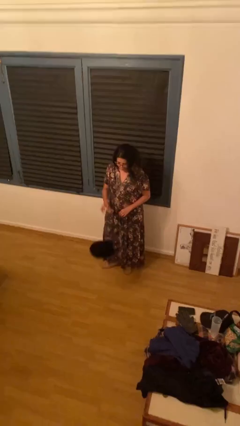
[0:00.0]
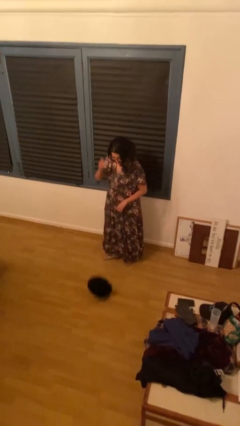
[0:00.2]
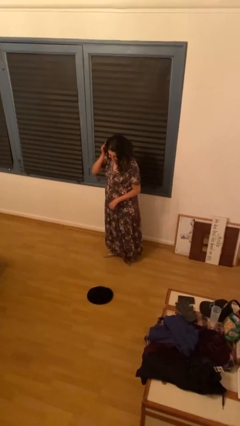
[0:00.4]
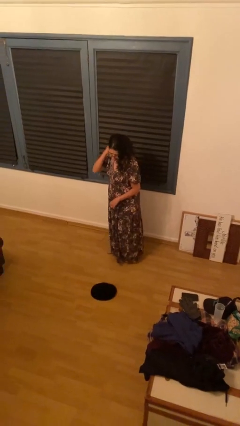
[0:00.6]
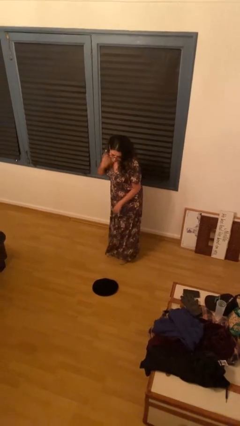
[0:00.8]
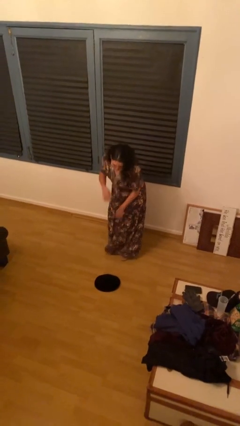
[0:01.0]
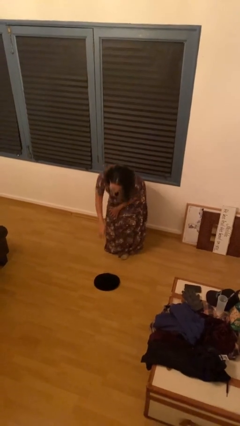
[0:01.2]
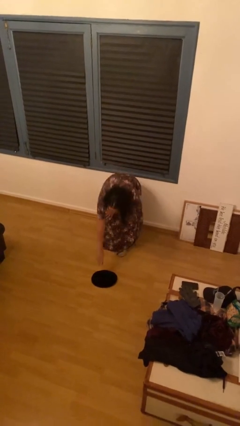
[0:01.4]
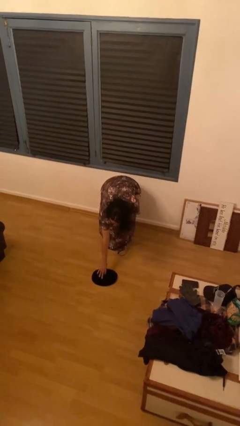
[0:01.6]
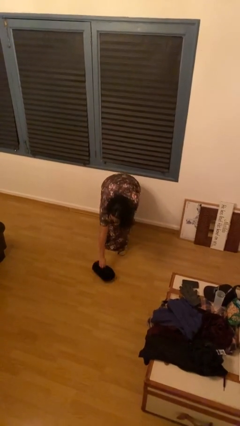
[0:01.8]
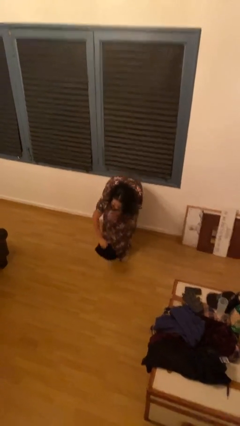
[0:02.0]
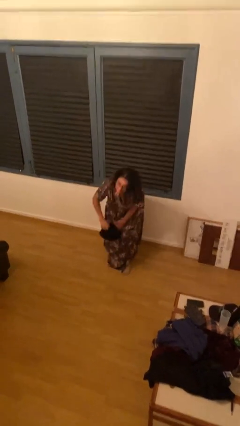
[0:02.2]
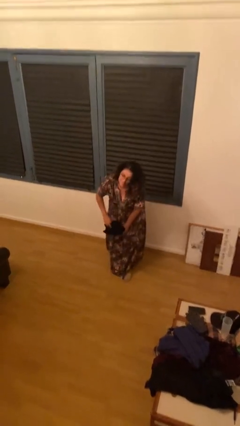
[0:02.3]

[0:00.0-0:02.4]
person drops object

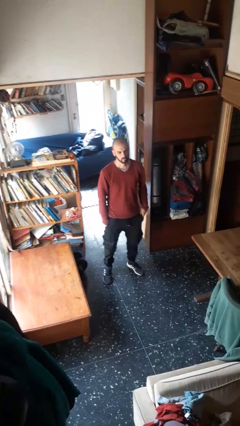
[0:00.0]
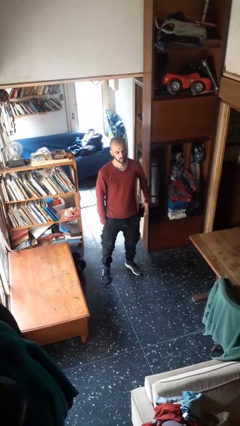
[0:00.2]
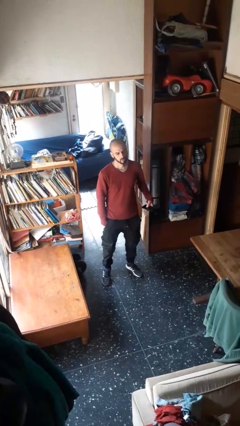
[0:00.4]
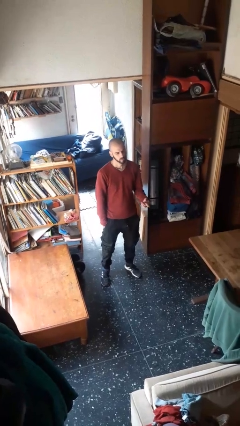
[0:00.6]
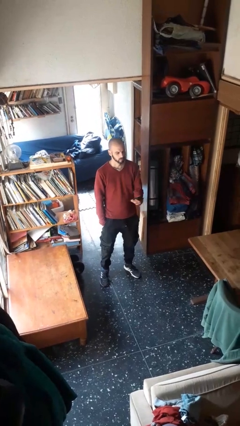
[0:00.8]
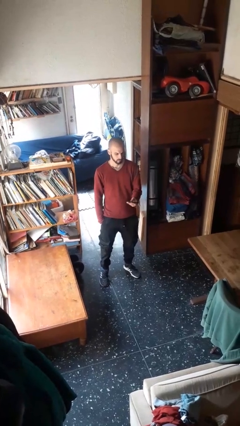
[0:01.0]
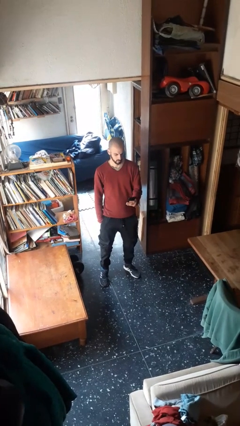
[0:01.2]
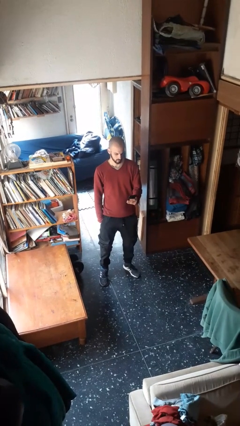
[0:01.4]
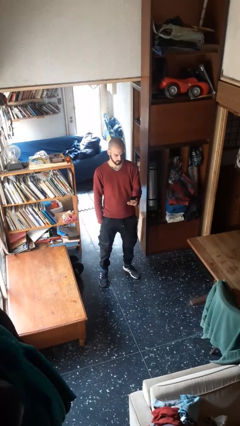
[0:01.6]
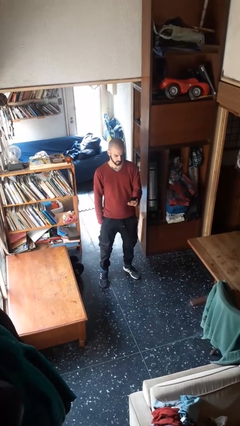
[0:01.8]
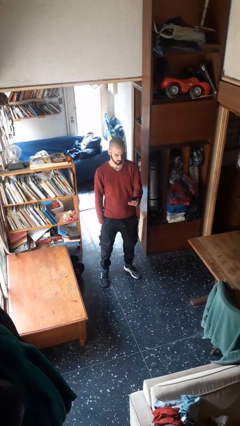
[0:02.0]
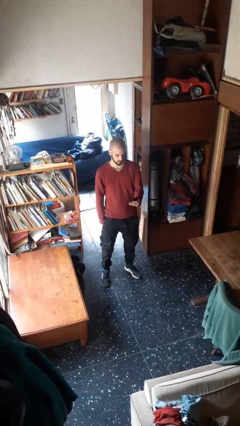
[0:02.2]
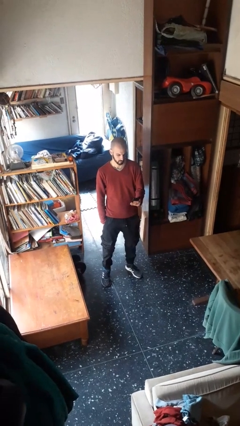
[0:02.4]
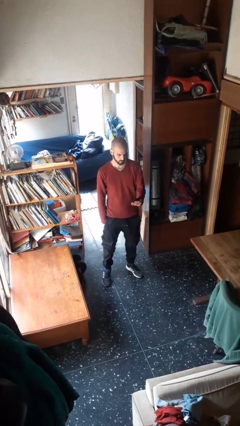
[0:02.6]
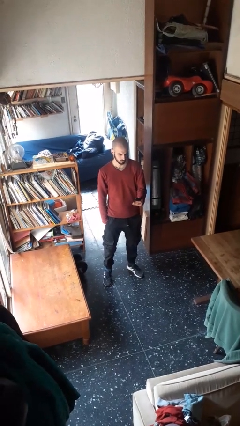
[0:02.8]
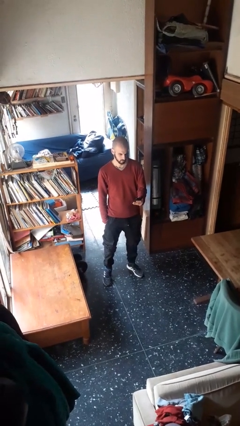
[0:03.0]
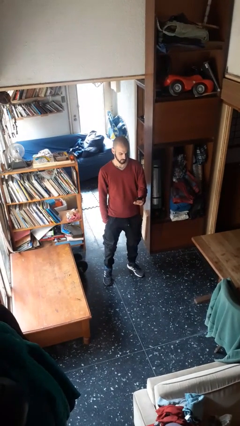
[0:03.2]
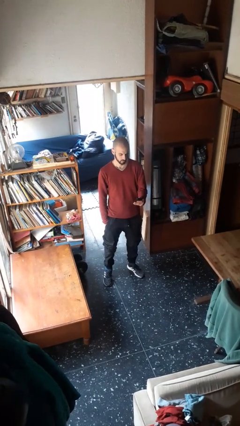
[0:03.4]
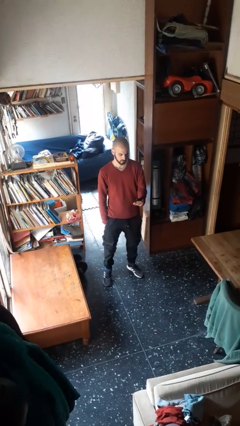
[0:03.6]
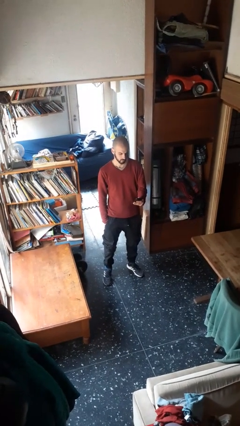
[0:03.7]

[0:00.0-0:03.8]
person takes phone from pocket

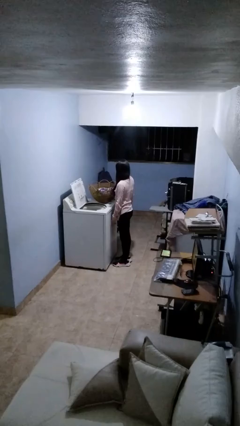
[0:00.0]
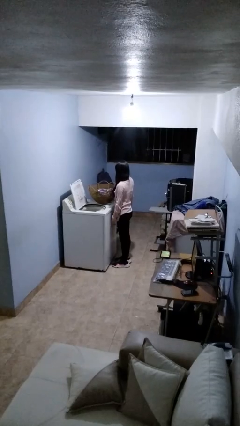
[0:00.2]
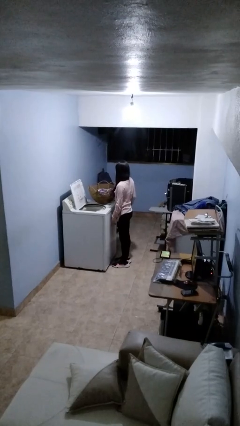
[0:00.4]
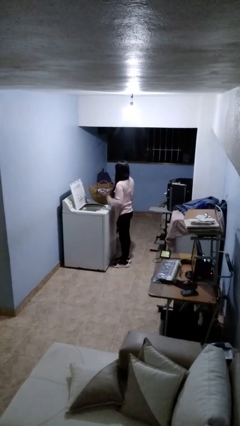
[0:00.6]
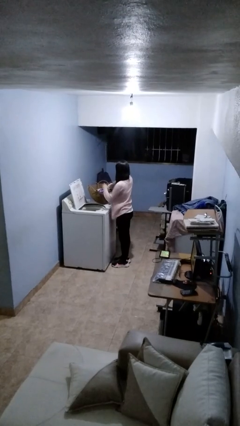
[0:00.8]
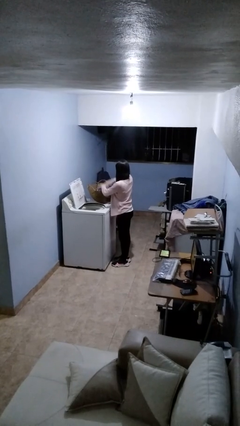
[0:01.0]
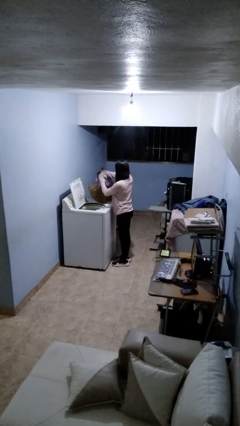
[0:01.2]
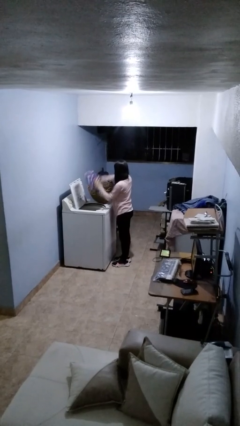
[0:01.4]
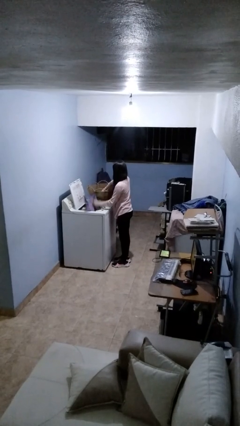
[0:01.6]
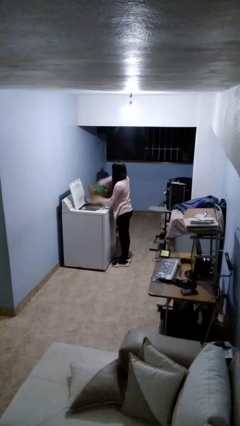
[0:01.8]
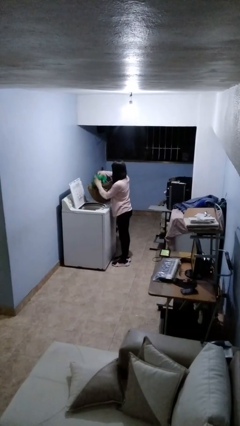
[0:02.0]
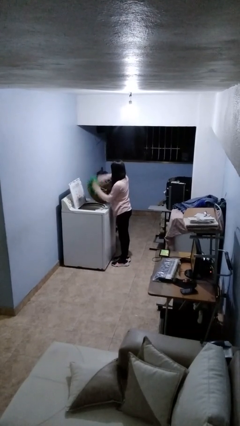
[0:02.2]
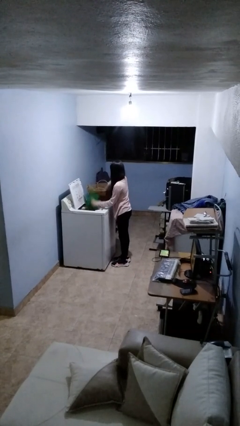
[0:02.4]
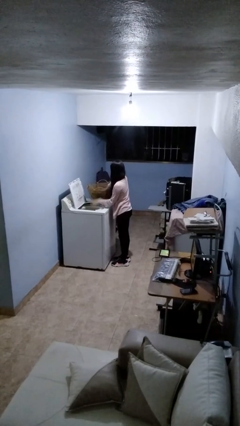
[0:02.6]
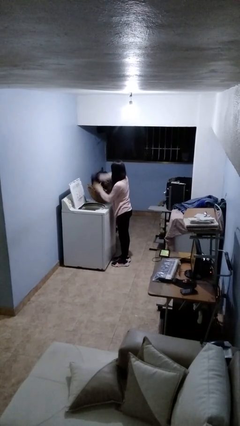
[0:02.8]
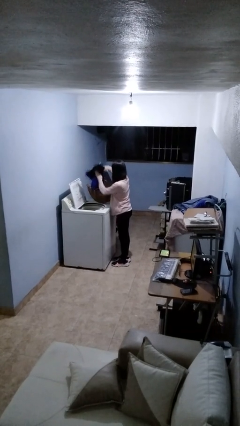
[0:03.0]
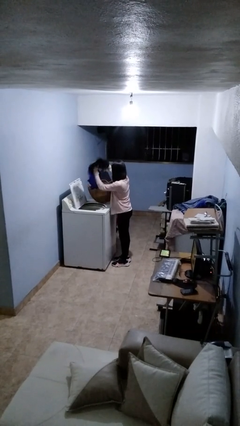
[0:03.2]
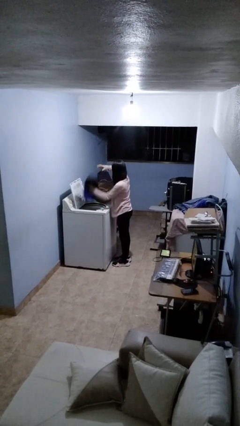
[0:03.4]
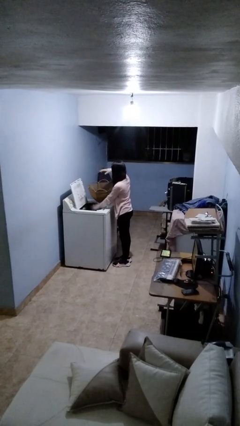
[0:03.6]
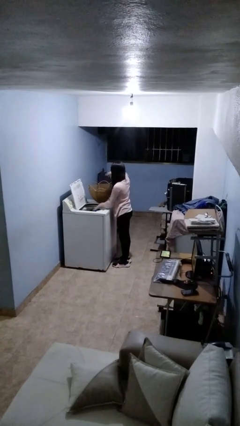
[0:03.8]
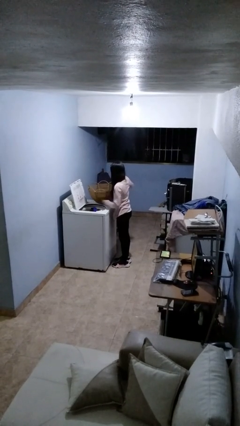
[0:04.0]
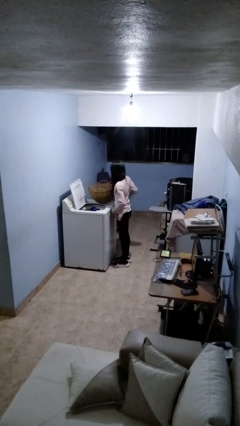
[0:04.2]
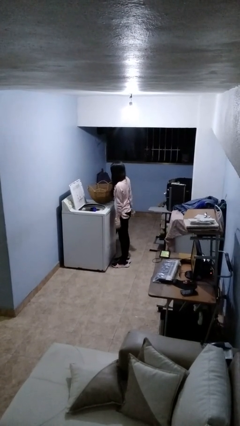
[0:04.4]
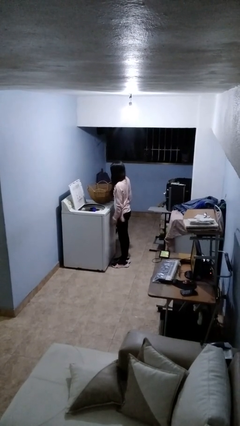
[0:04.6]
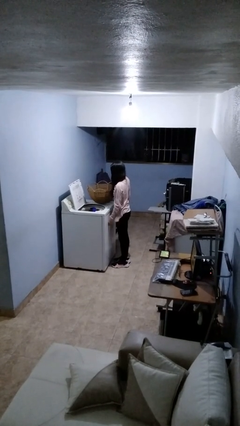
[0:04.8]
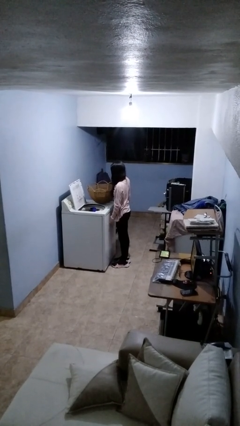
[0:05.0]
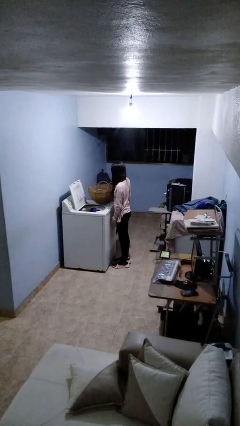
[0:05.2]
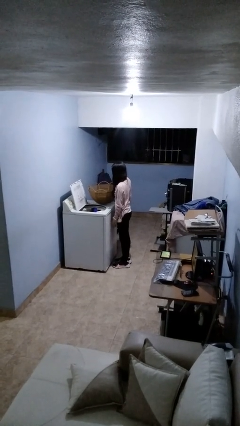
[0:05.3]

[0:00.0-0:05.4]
person unloads clotheswasher

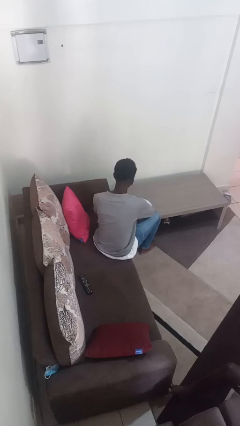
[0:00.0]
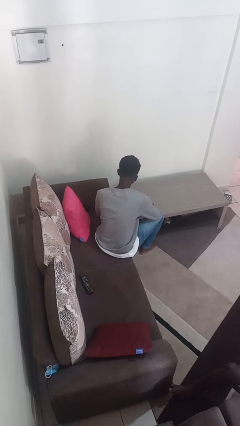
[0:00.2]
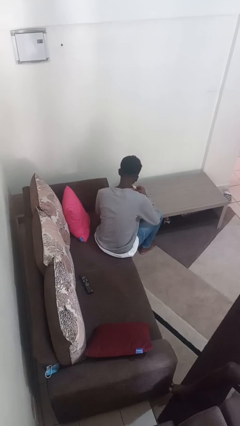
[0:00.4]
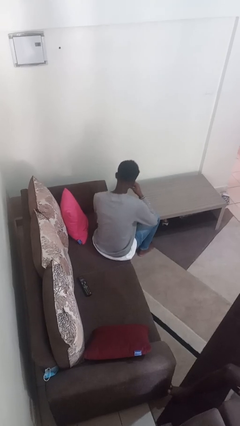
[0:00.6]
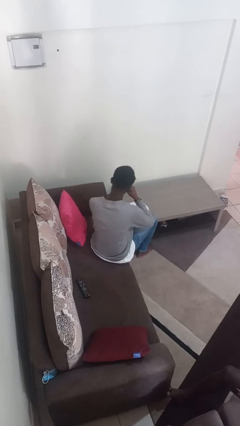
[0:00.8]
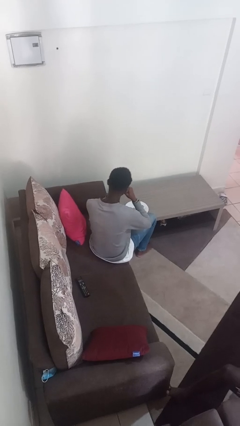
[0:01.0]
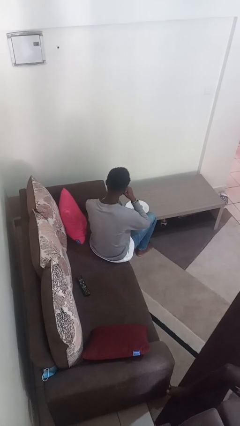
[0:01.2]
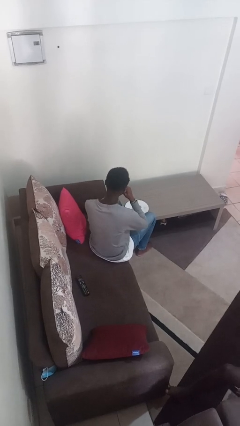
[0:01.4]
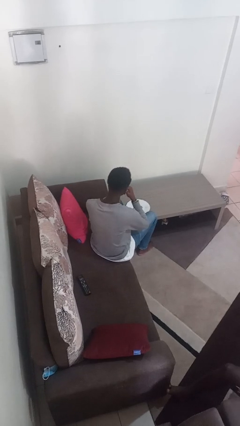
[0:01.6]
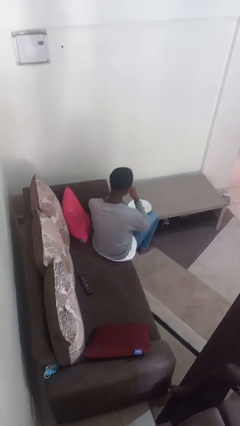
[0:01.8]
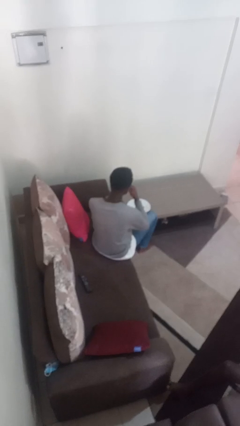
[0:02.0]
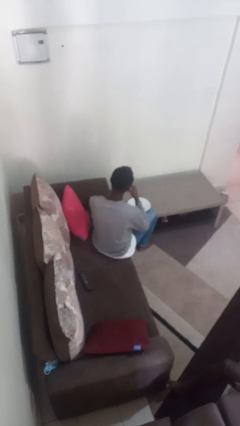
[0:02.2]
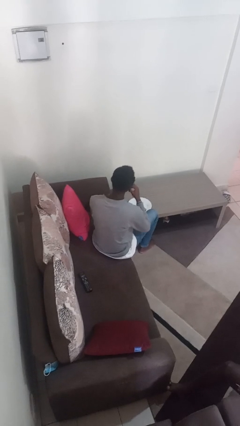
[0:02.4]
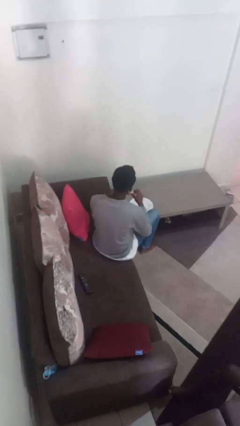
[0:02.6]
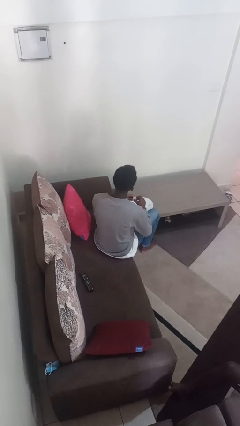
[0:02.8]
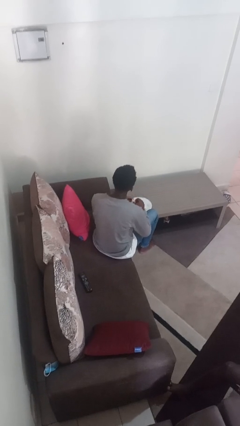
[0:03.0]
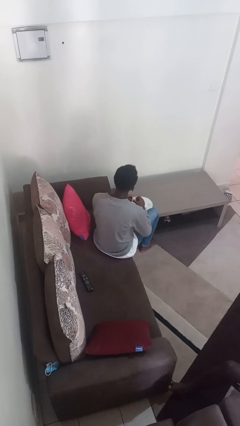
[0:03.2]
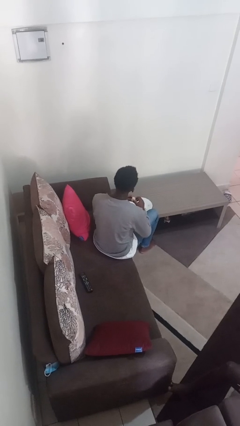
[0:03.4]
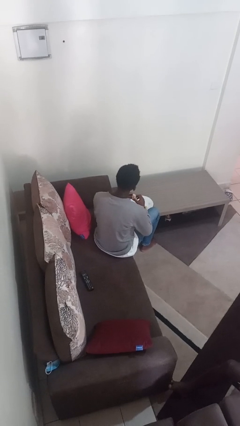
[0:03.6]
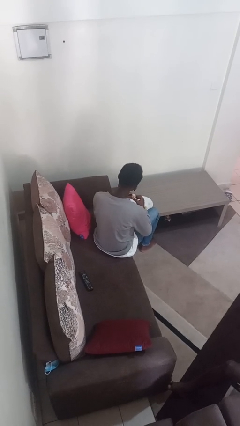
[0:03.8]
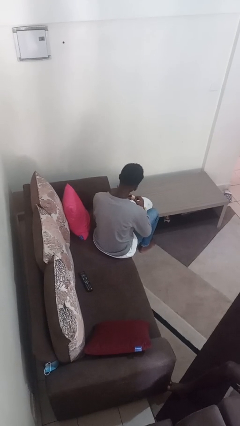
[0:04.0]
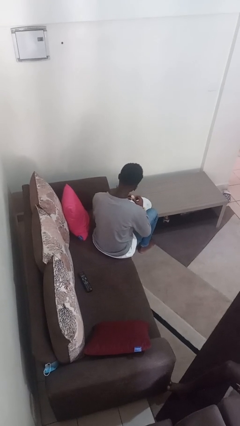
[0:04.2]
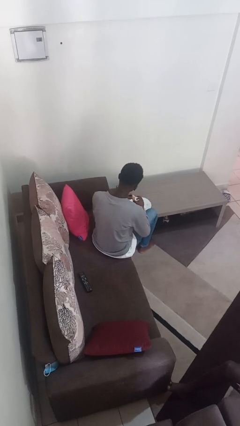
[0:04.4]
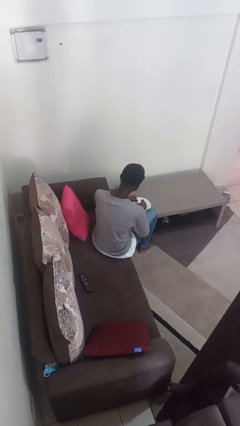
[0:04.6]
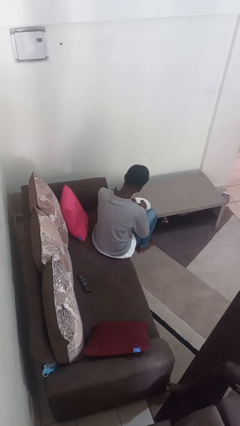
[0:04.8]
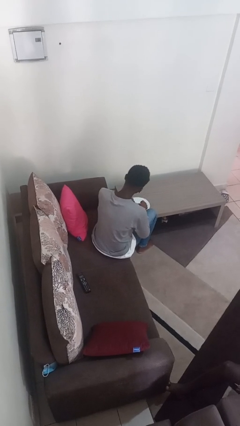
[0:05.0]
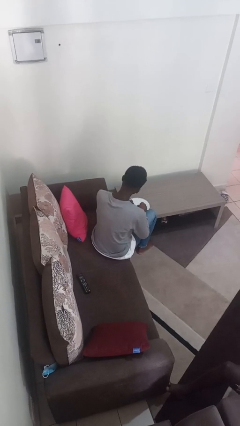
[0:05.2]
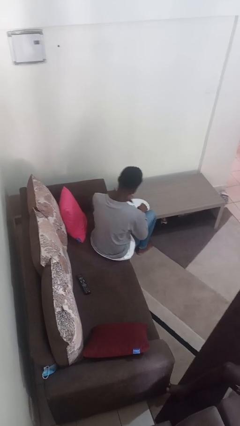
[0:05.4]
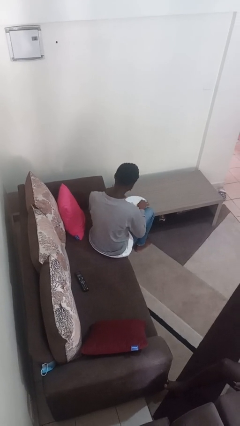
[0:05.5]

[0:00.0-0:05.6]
person eats with hands

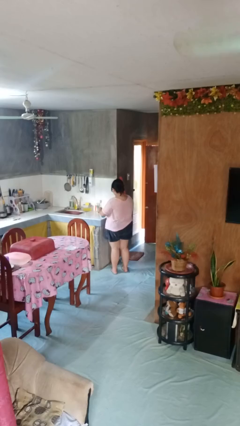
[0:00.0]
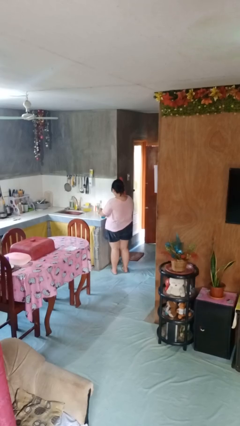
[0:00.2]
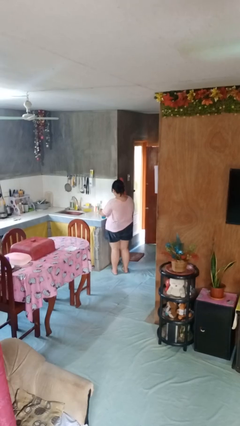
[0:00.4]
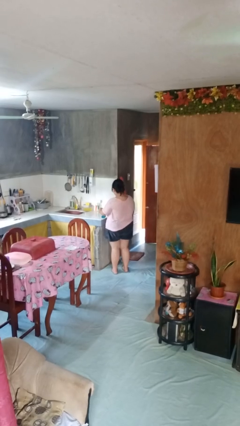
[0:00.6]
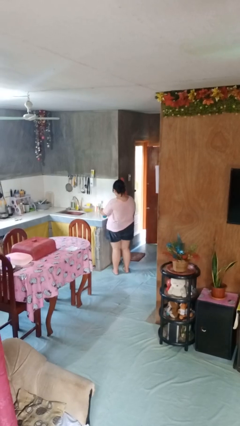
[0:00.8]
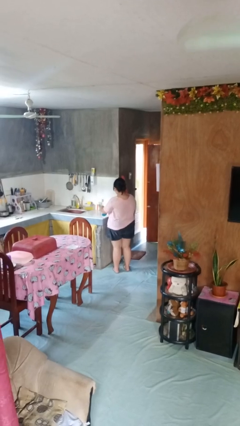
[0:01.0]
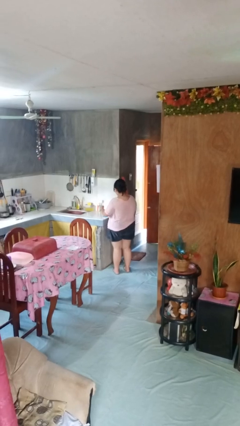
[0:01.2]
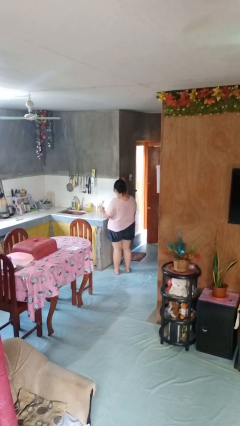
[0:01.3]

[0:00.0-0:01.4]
person sprays from bottle
